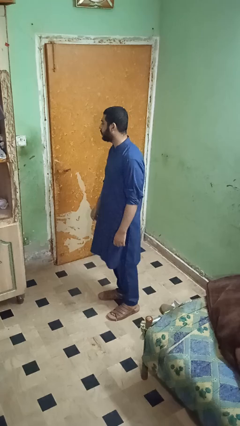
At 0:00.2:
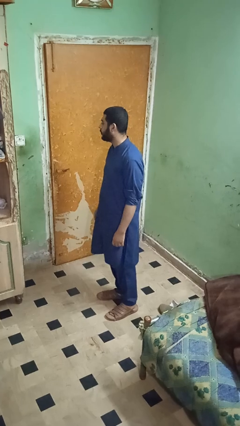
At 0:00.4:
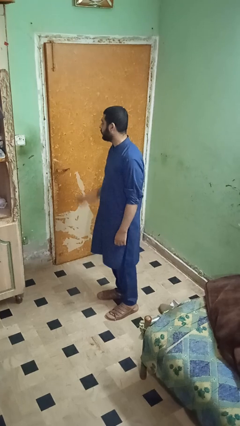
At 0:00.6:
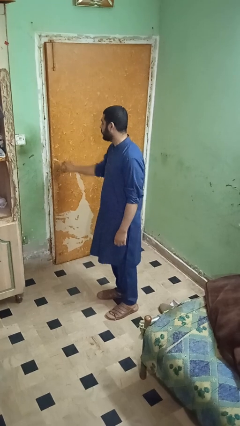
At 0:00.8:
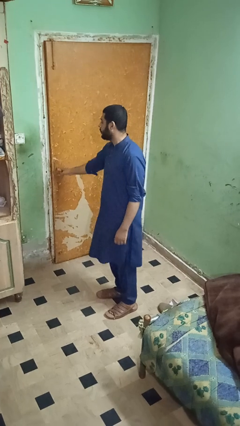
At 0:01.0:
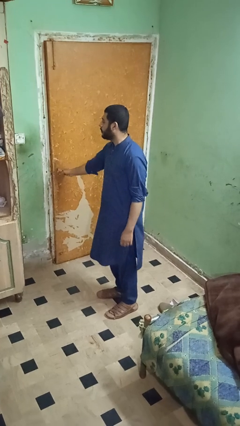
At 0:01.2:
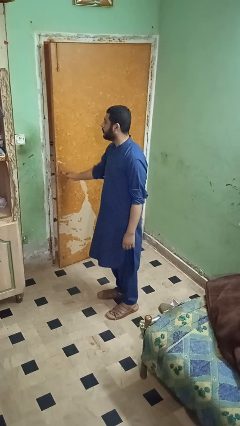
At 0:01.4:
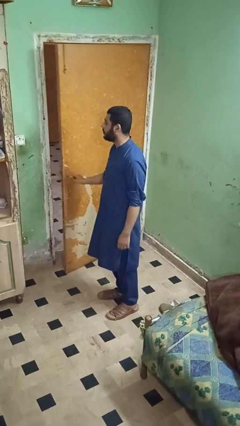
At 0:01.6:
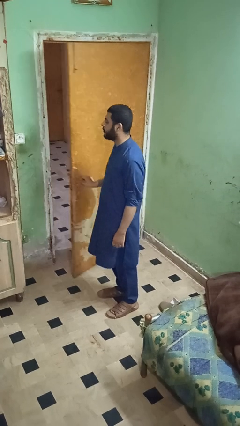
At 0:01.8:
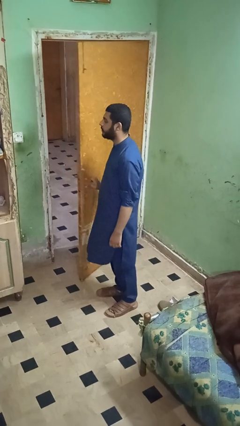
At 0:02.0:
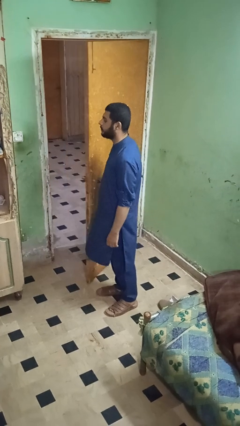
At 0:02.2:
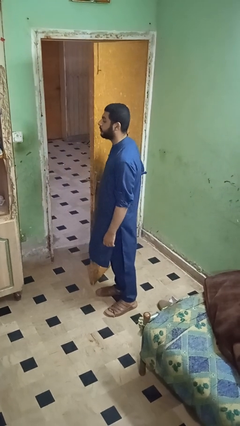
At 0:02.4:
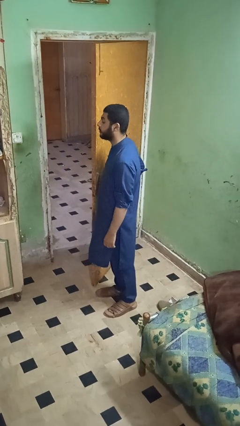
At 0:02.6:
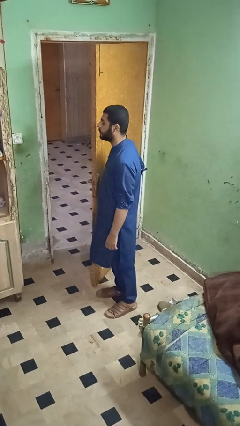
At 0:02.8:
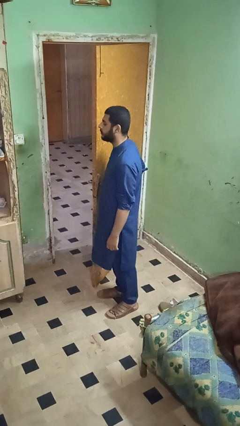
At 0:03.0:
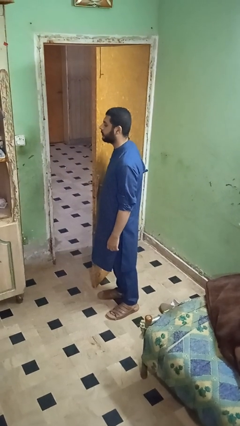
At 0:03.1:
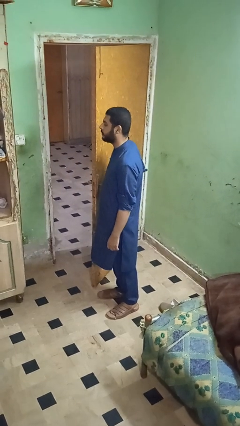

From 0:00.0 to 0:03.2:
person opens facility door

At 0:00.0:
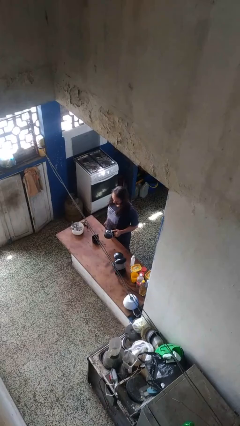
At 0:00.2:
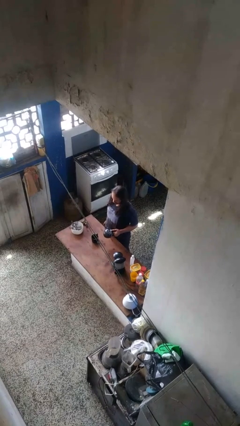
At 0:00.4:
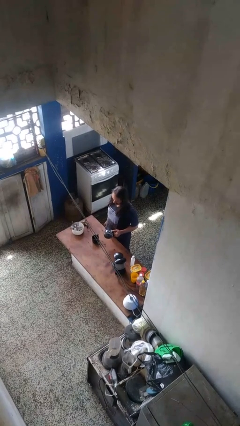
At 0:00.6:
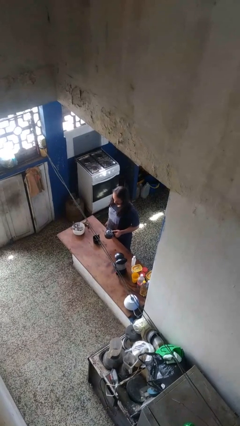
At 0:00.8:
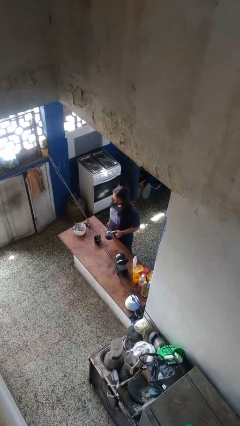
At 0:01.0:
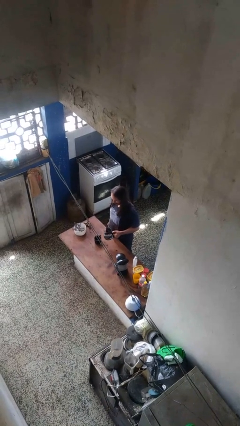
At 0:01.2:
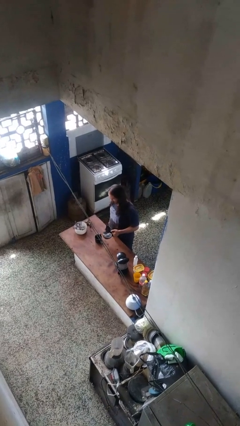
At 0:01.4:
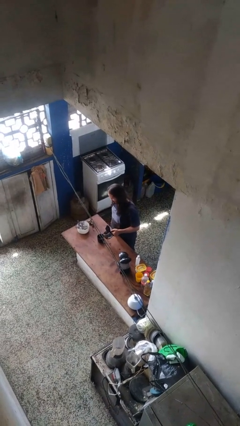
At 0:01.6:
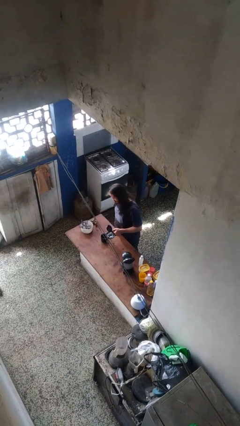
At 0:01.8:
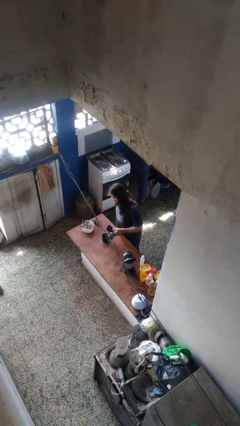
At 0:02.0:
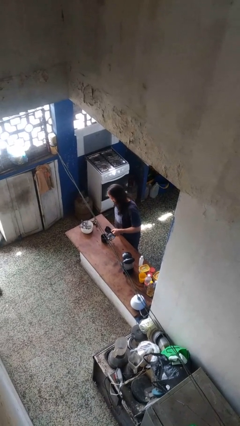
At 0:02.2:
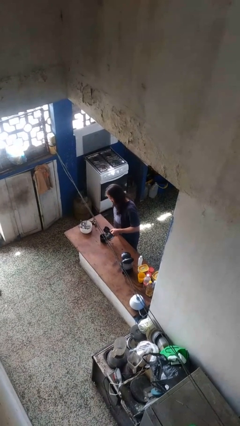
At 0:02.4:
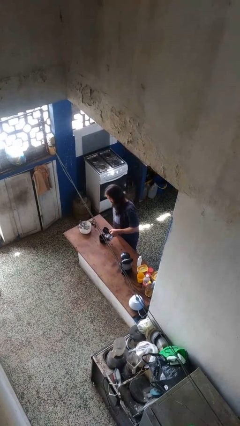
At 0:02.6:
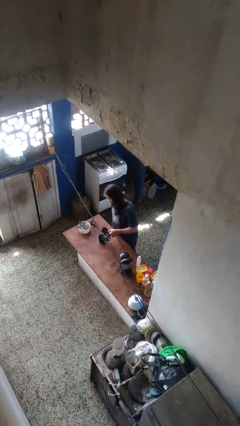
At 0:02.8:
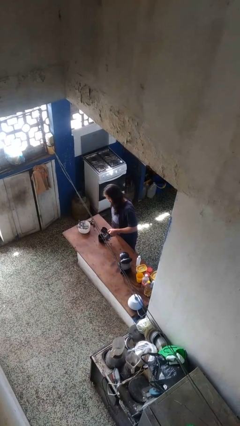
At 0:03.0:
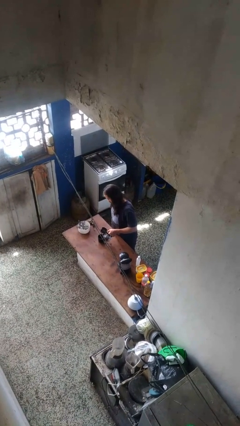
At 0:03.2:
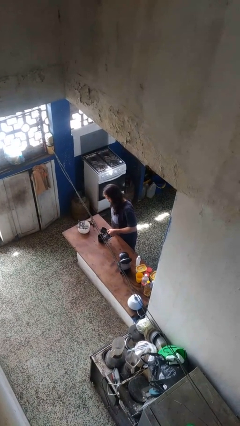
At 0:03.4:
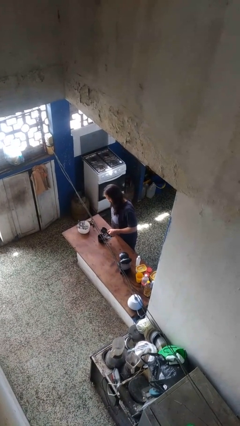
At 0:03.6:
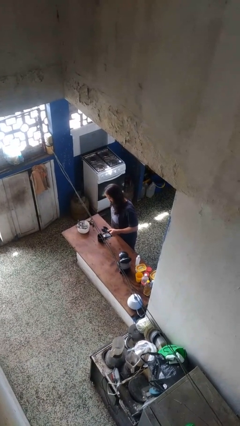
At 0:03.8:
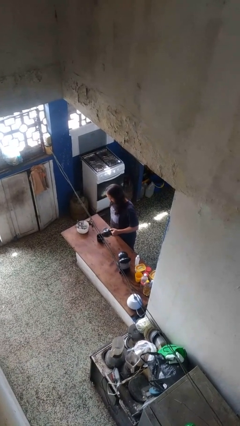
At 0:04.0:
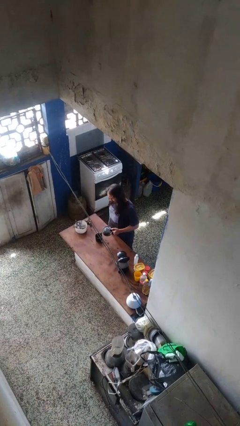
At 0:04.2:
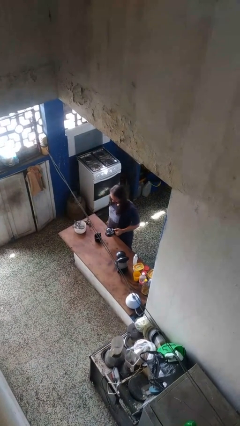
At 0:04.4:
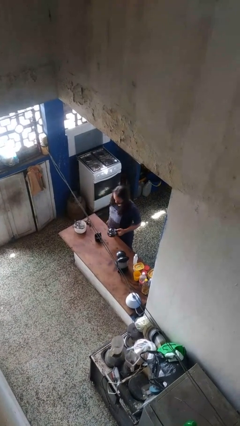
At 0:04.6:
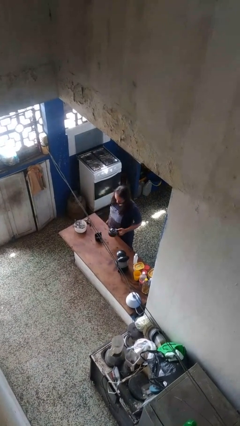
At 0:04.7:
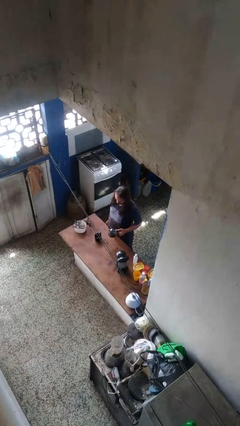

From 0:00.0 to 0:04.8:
person pours coffee into mug

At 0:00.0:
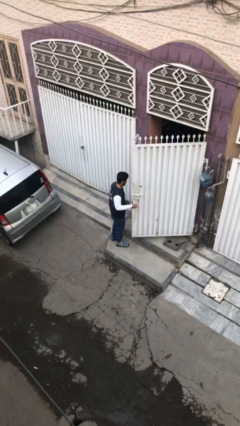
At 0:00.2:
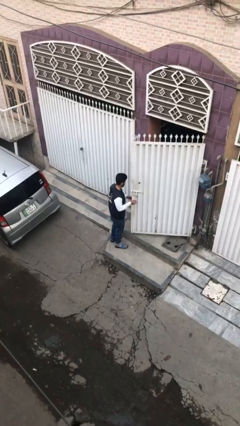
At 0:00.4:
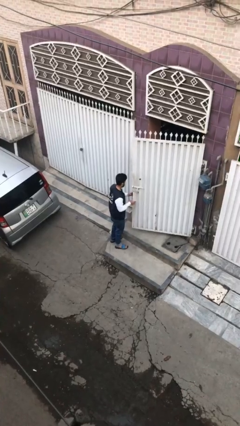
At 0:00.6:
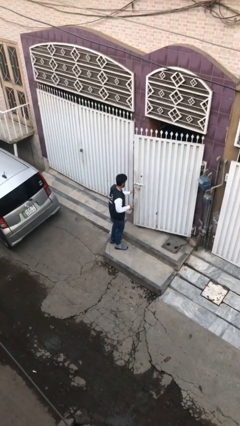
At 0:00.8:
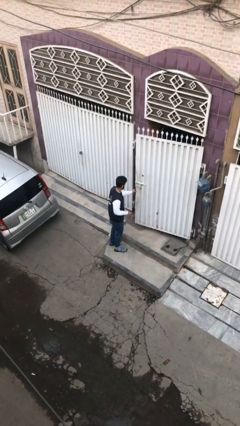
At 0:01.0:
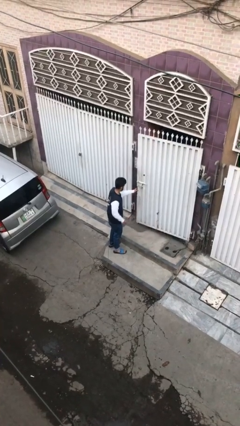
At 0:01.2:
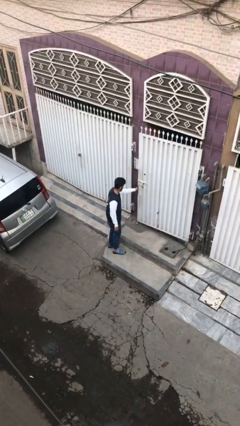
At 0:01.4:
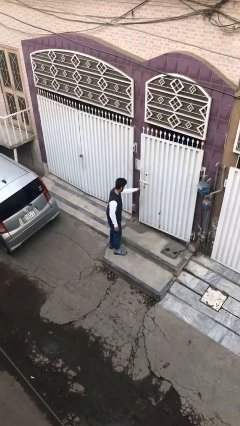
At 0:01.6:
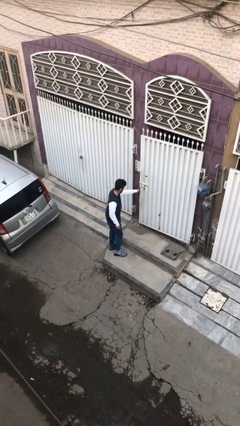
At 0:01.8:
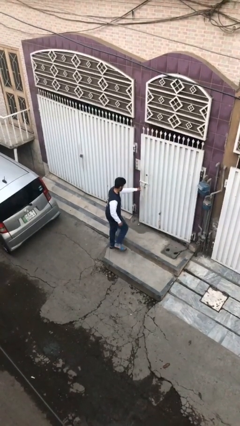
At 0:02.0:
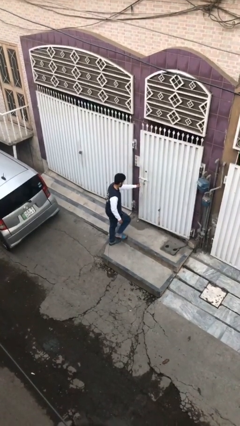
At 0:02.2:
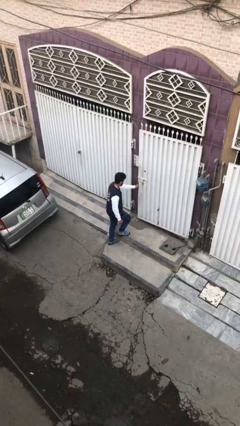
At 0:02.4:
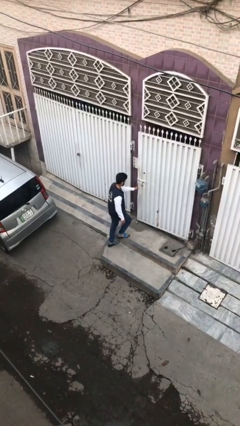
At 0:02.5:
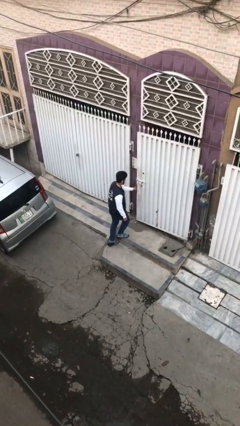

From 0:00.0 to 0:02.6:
person closes facility door

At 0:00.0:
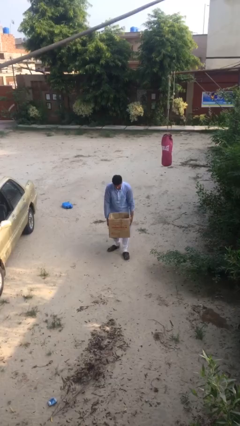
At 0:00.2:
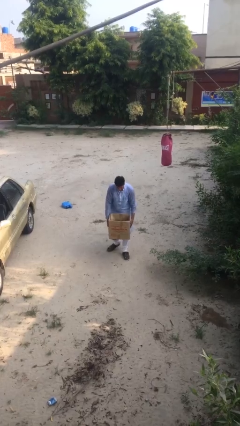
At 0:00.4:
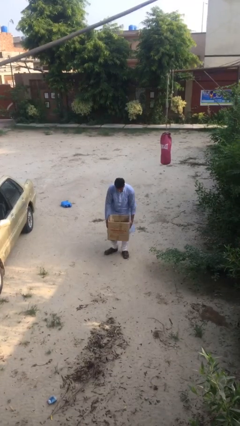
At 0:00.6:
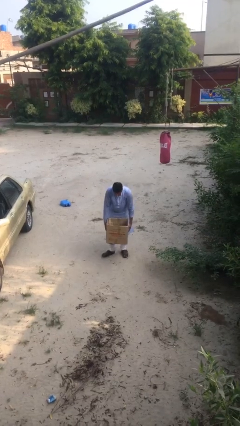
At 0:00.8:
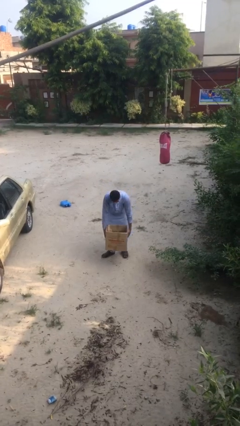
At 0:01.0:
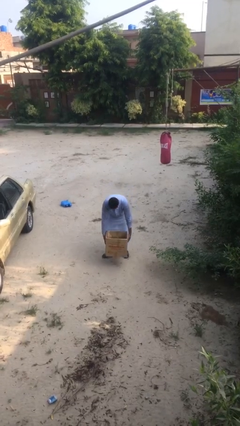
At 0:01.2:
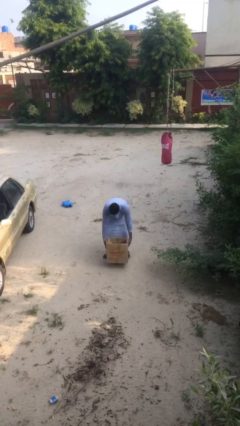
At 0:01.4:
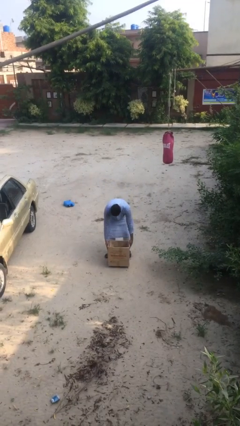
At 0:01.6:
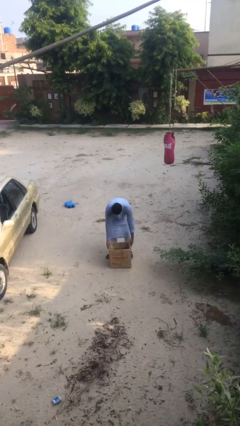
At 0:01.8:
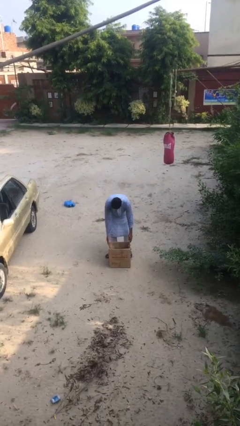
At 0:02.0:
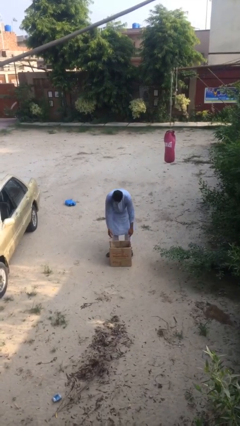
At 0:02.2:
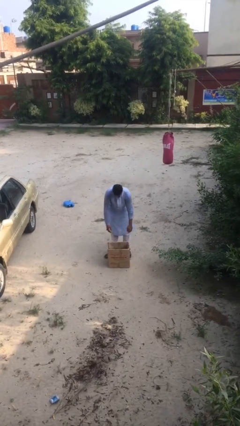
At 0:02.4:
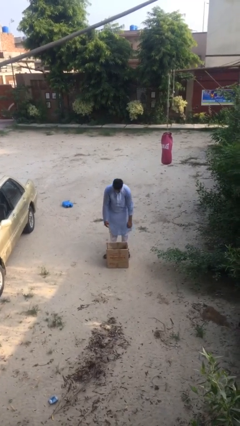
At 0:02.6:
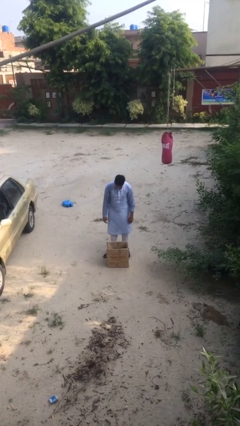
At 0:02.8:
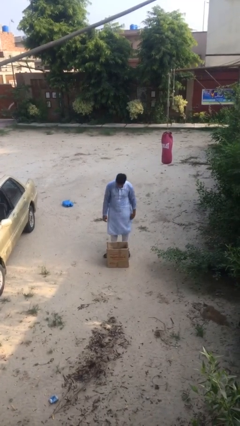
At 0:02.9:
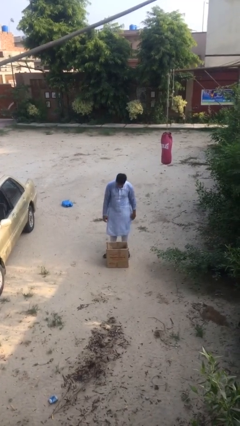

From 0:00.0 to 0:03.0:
person puts down object on floor

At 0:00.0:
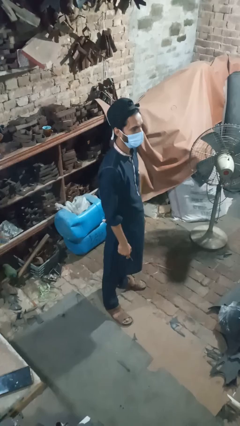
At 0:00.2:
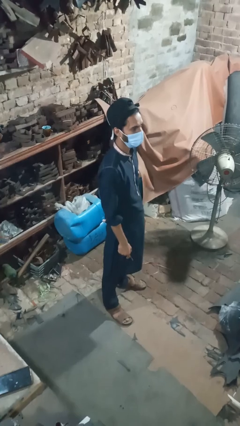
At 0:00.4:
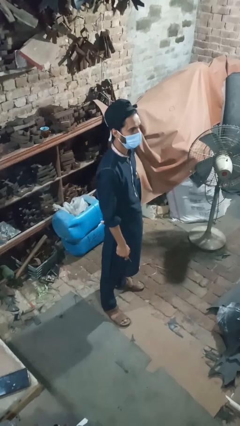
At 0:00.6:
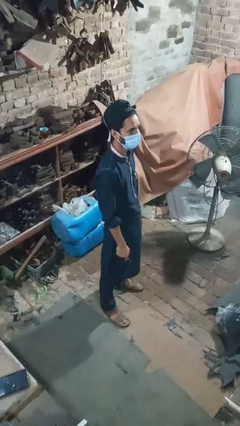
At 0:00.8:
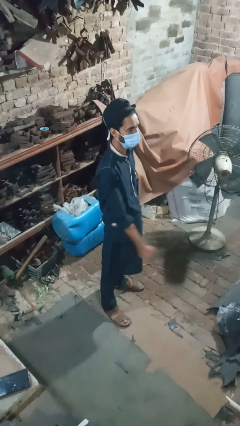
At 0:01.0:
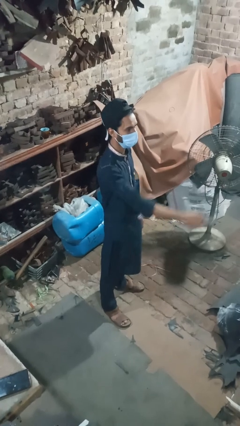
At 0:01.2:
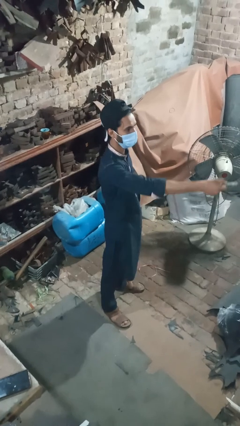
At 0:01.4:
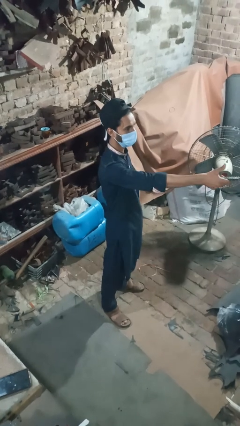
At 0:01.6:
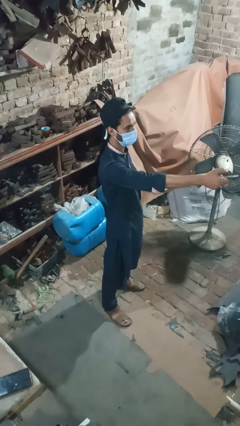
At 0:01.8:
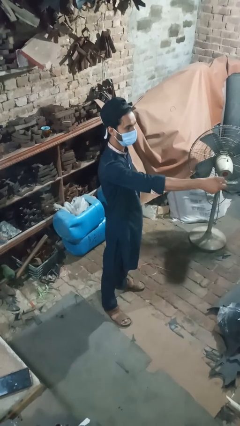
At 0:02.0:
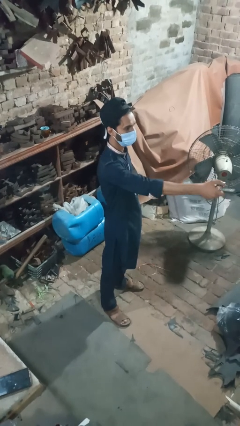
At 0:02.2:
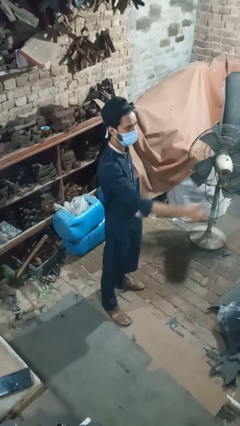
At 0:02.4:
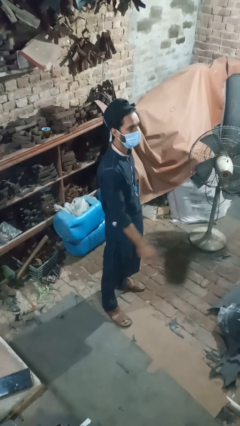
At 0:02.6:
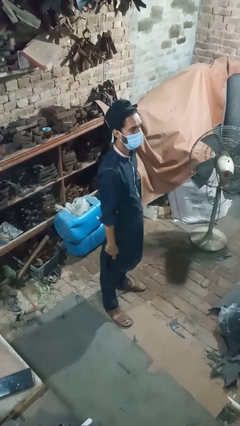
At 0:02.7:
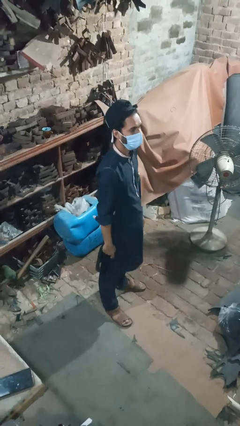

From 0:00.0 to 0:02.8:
person uses television remote

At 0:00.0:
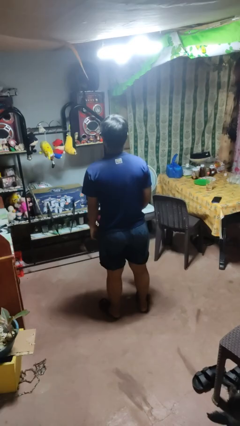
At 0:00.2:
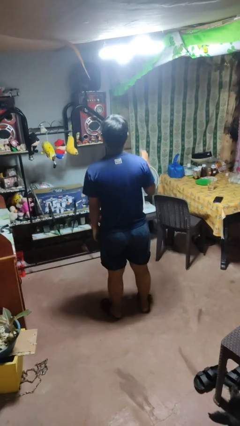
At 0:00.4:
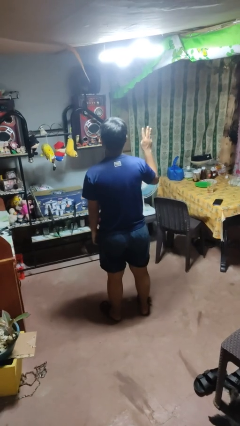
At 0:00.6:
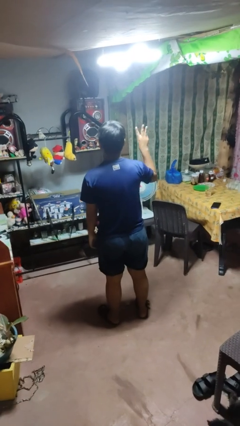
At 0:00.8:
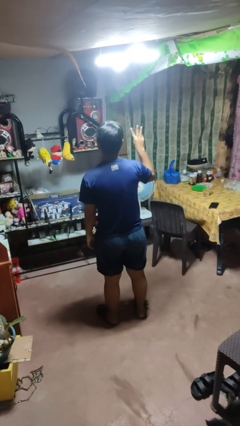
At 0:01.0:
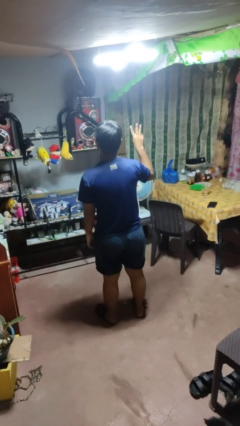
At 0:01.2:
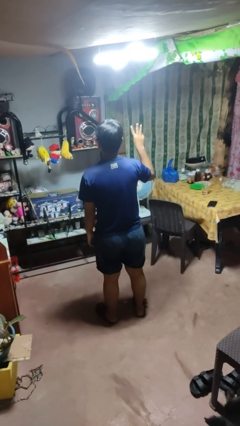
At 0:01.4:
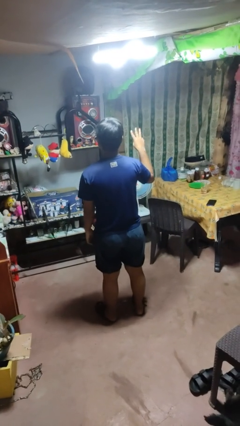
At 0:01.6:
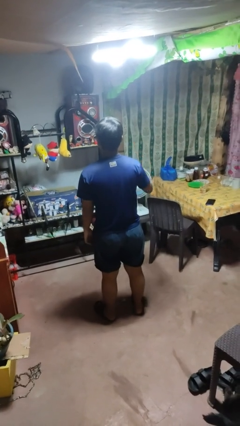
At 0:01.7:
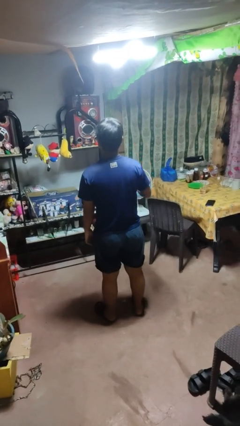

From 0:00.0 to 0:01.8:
person gestures number three
